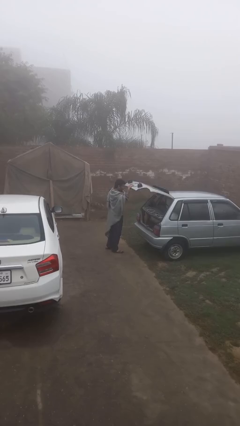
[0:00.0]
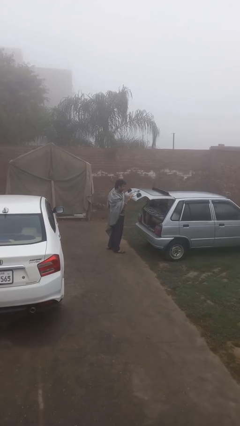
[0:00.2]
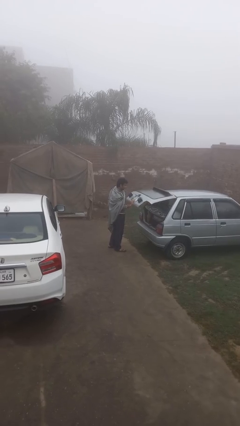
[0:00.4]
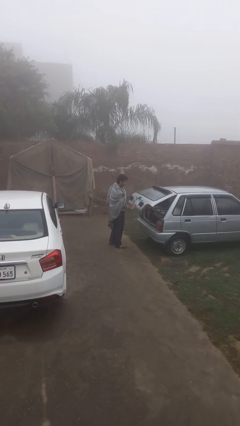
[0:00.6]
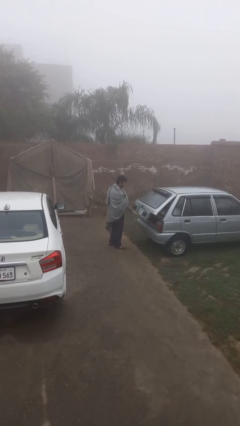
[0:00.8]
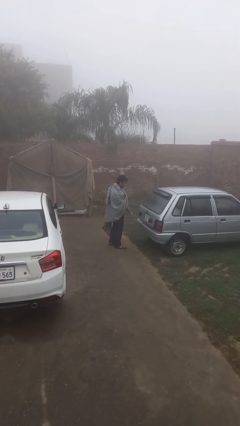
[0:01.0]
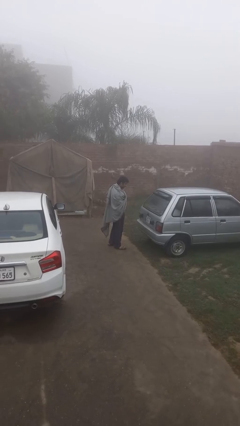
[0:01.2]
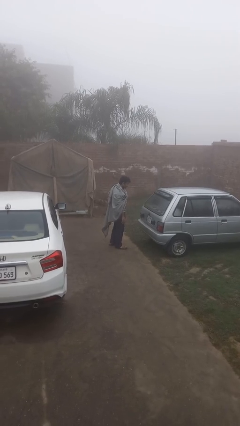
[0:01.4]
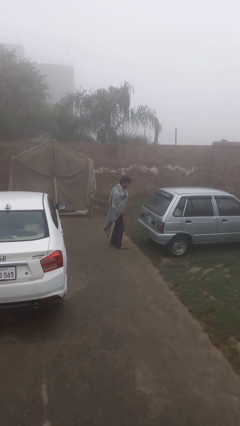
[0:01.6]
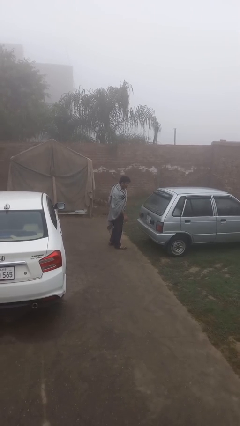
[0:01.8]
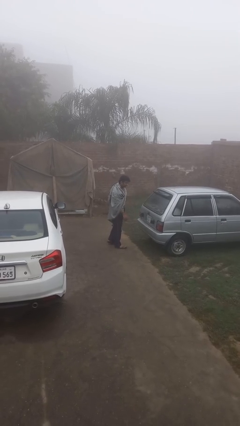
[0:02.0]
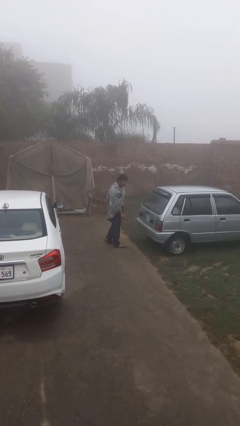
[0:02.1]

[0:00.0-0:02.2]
person closes car trunk

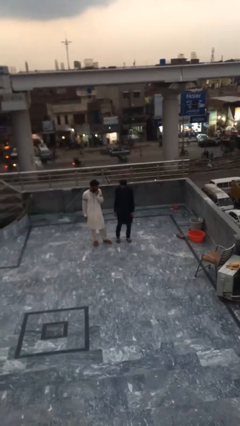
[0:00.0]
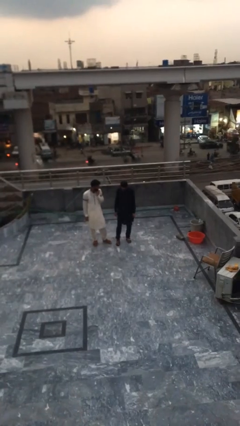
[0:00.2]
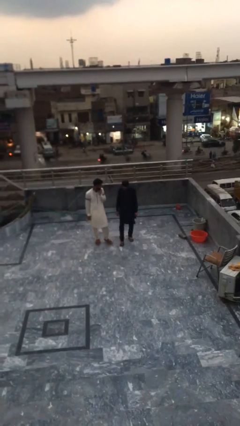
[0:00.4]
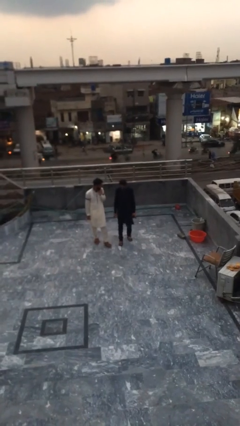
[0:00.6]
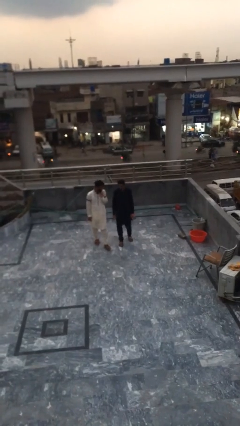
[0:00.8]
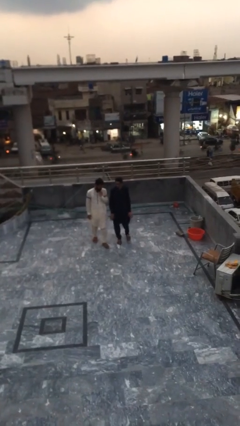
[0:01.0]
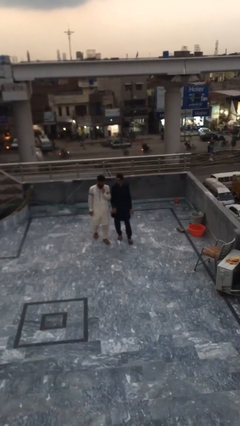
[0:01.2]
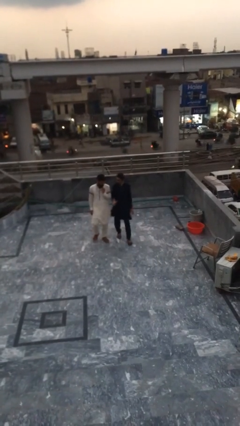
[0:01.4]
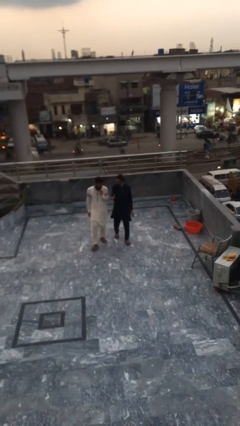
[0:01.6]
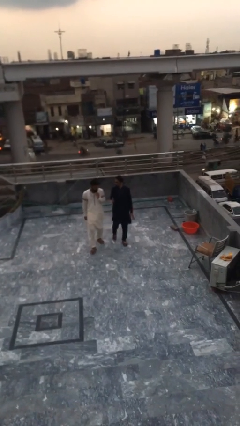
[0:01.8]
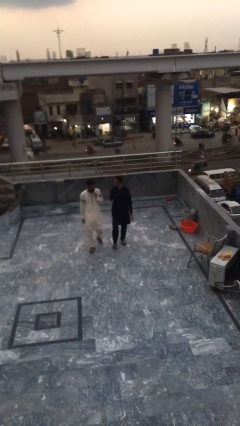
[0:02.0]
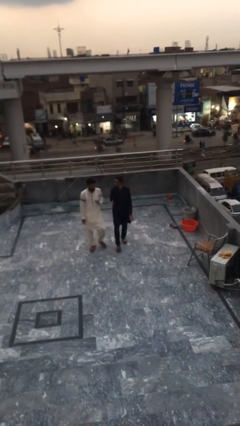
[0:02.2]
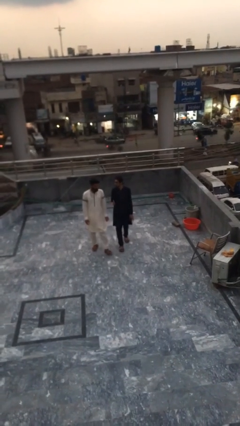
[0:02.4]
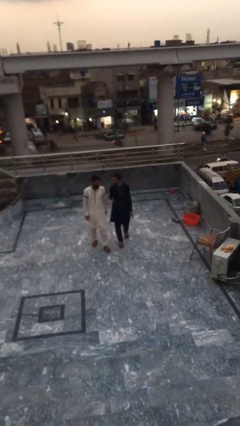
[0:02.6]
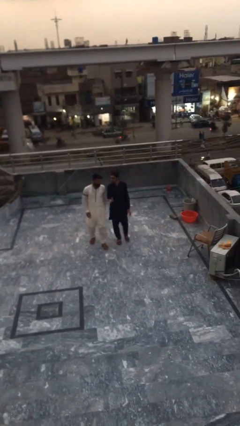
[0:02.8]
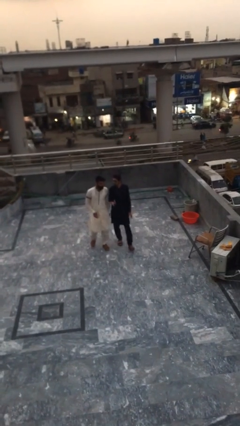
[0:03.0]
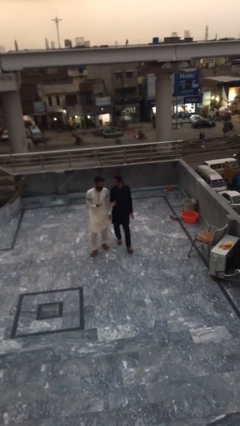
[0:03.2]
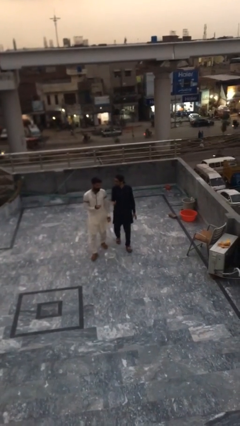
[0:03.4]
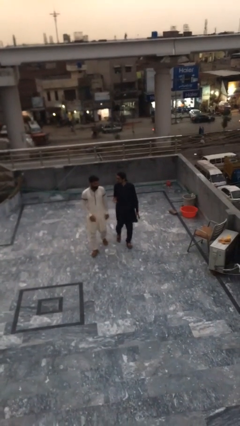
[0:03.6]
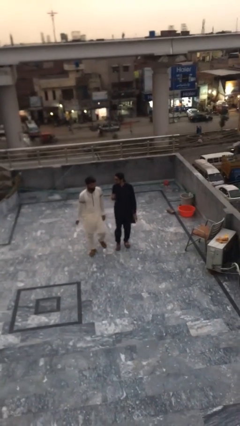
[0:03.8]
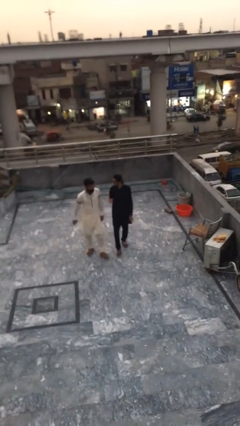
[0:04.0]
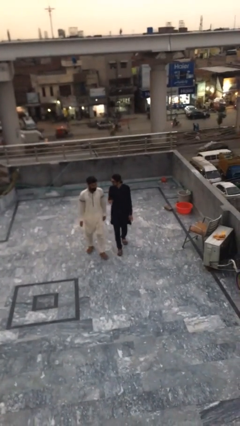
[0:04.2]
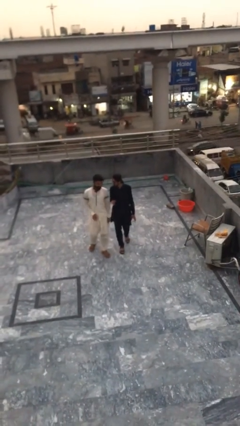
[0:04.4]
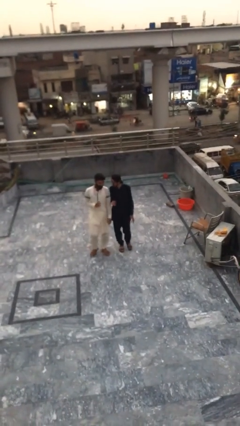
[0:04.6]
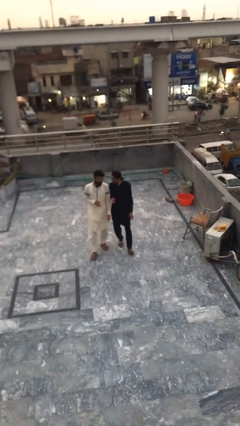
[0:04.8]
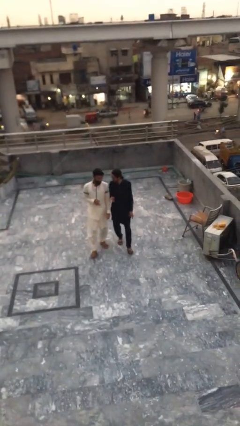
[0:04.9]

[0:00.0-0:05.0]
person talks to person

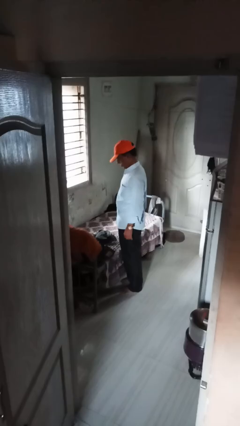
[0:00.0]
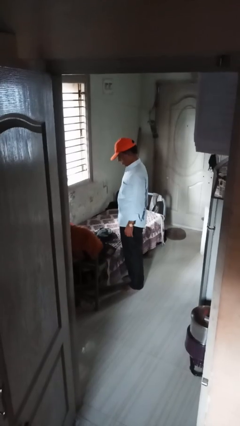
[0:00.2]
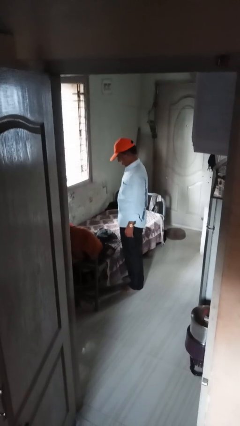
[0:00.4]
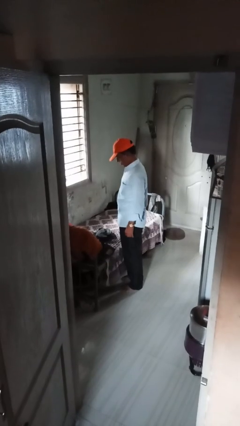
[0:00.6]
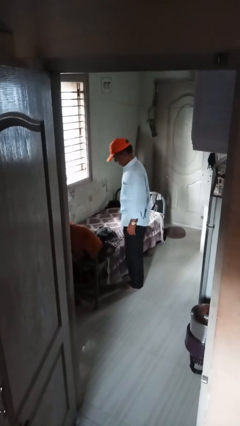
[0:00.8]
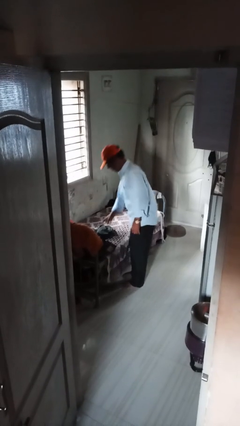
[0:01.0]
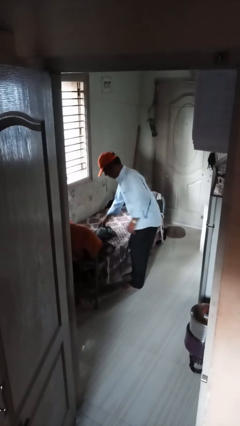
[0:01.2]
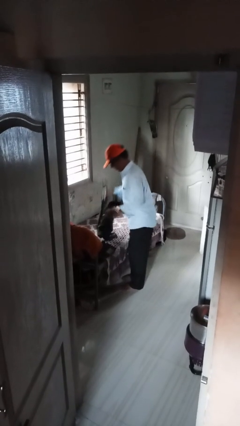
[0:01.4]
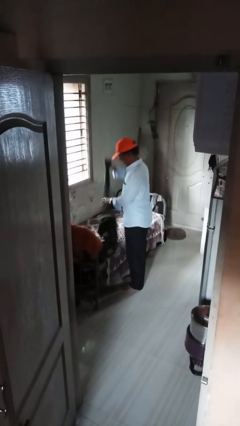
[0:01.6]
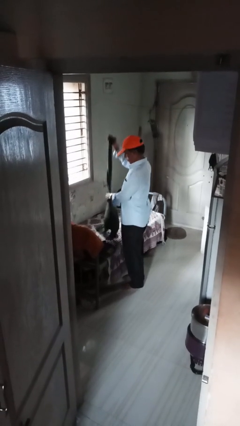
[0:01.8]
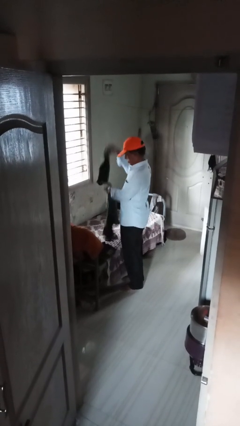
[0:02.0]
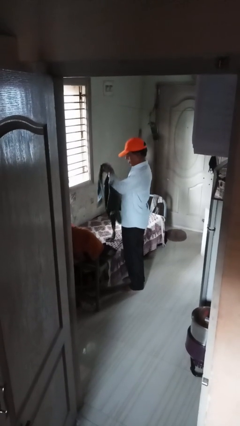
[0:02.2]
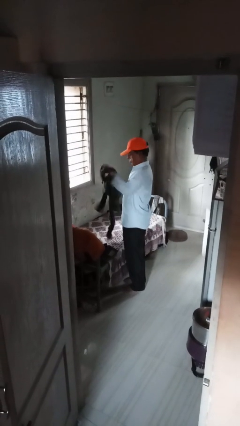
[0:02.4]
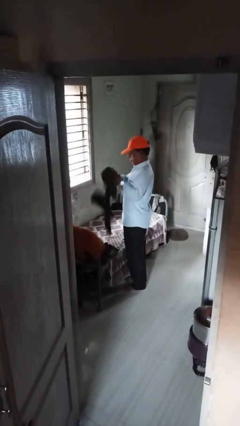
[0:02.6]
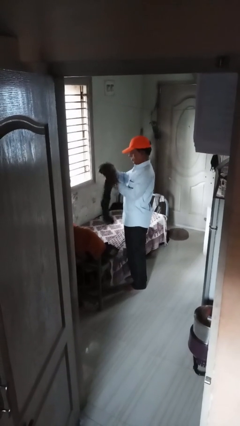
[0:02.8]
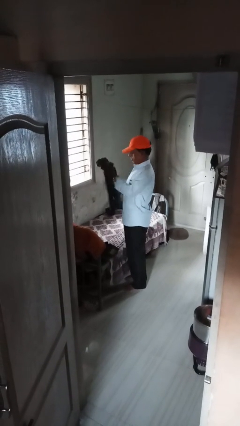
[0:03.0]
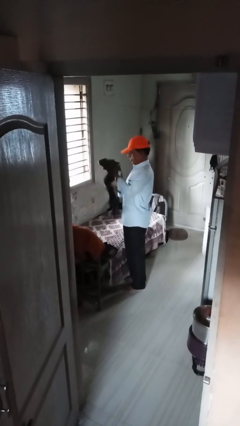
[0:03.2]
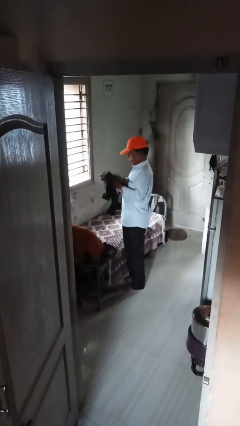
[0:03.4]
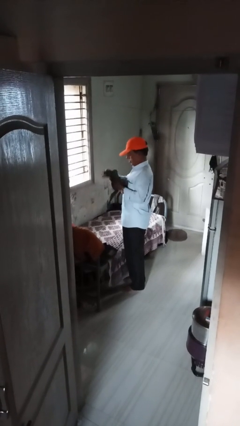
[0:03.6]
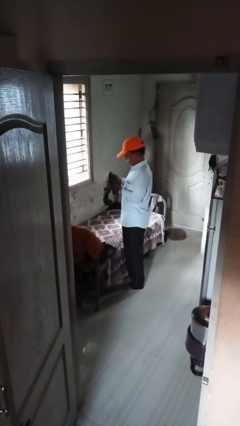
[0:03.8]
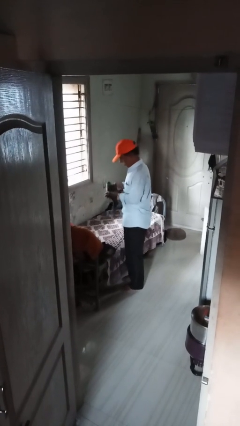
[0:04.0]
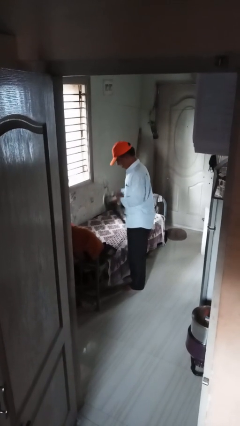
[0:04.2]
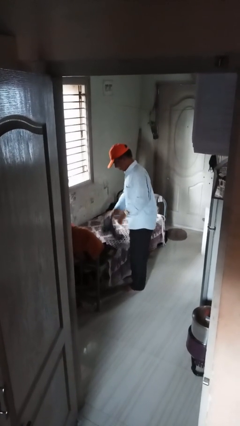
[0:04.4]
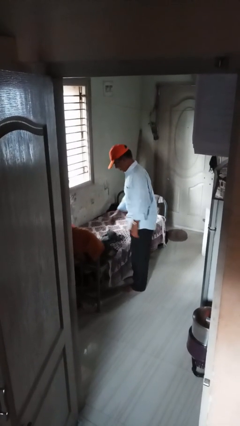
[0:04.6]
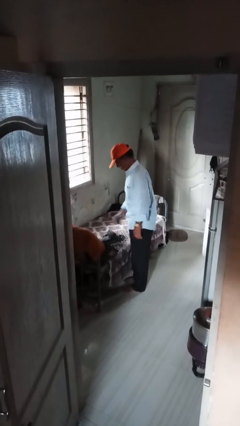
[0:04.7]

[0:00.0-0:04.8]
person folds shirt

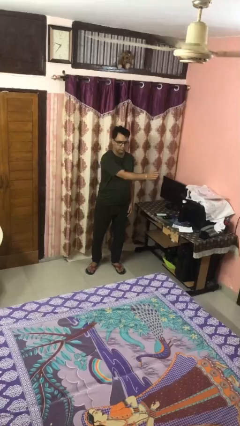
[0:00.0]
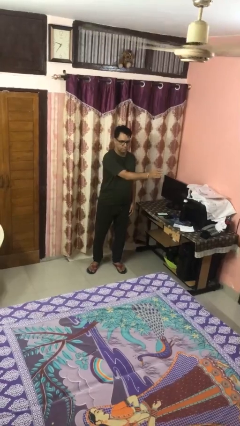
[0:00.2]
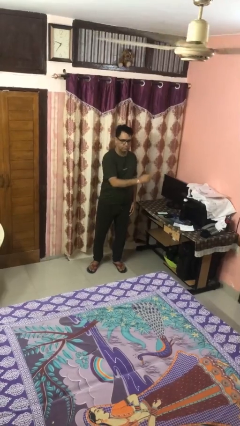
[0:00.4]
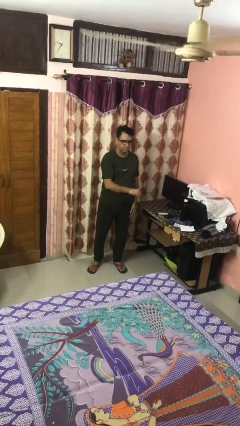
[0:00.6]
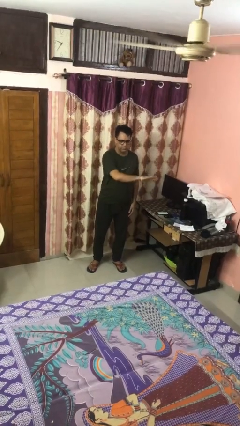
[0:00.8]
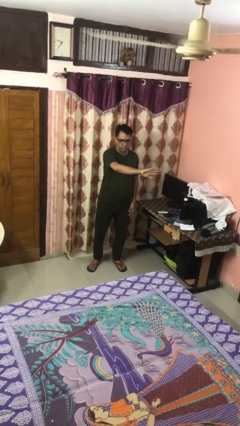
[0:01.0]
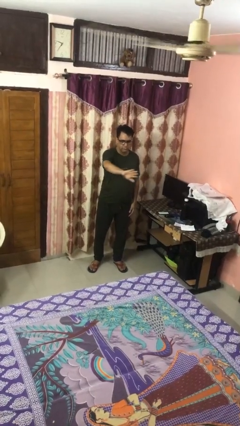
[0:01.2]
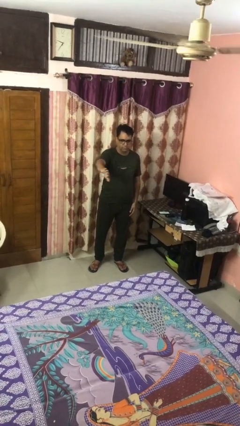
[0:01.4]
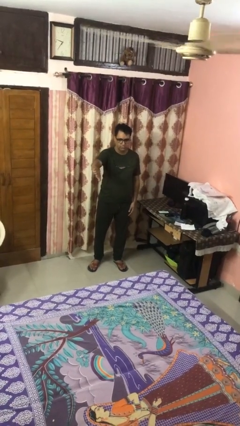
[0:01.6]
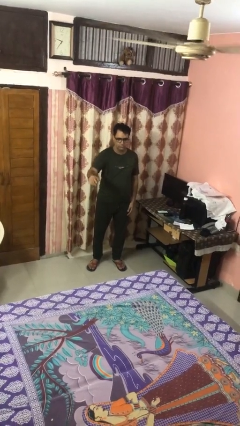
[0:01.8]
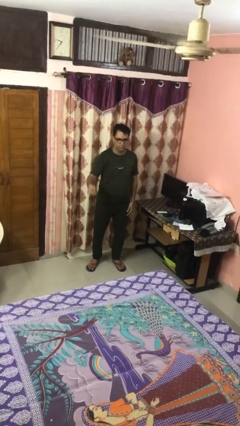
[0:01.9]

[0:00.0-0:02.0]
person gestures swipe right

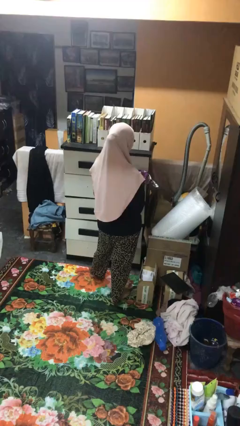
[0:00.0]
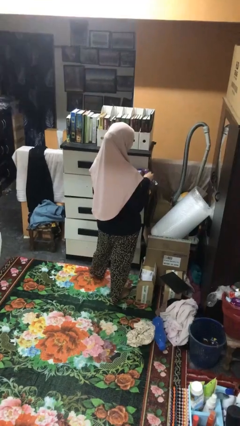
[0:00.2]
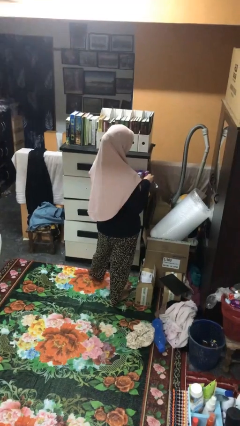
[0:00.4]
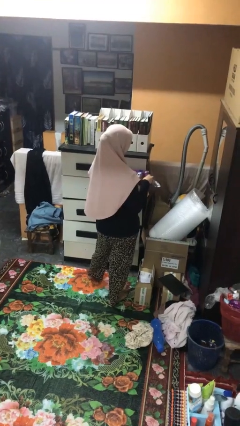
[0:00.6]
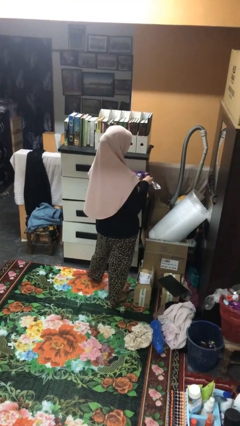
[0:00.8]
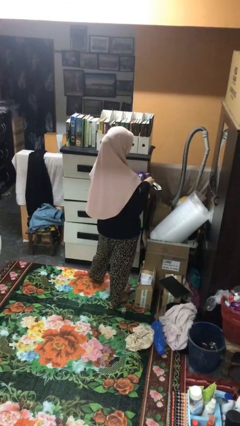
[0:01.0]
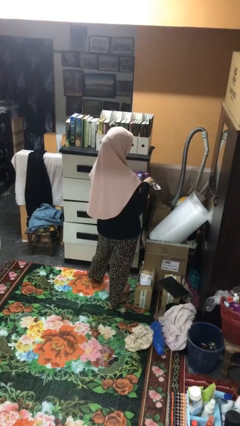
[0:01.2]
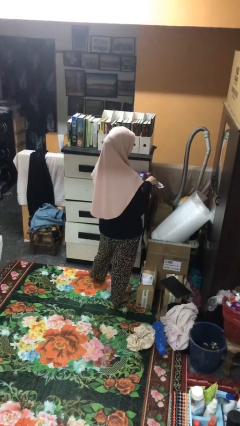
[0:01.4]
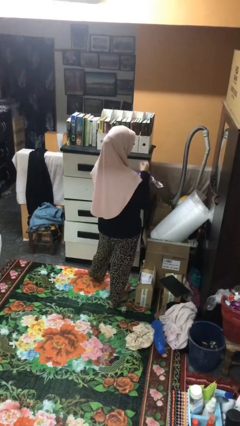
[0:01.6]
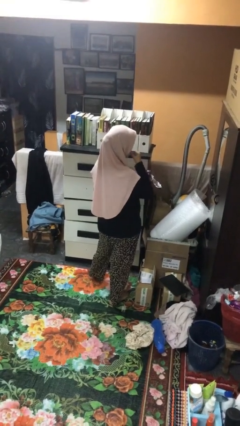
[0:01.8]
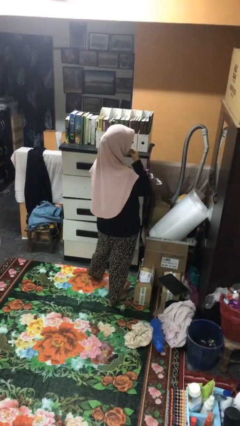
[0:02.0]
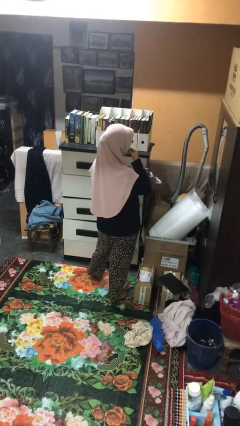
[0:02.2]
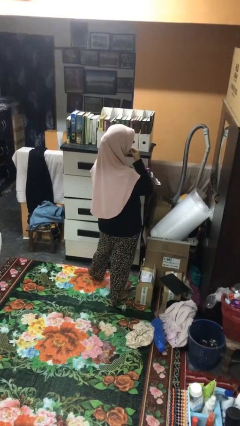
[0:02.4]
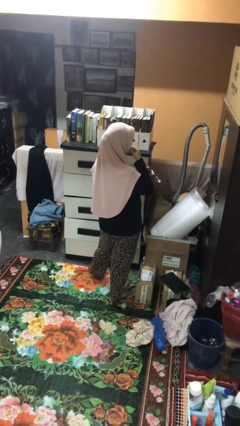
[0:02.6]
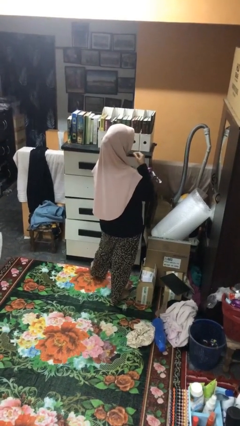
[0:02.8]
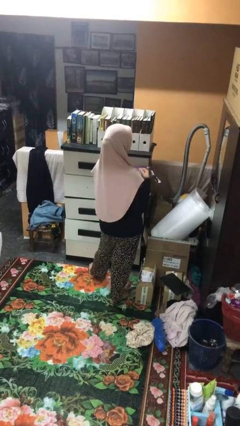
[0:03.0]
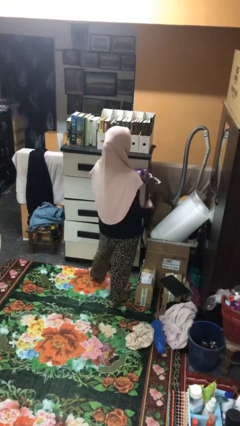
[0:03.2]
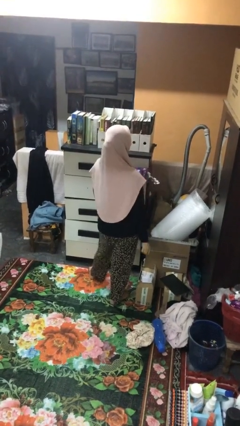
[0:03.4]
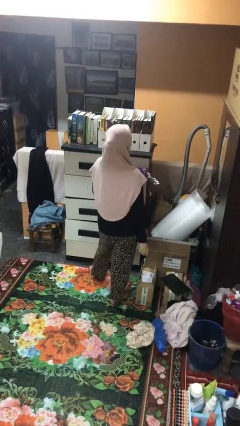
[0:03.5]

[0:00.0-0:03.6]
person eats snack from bag
